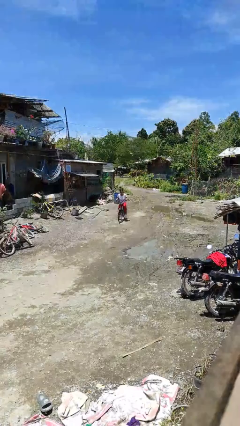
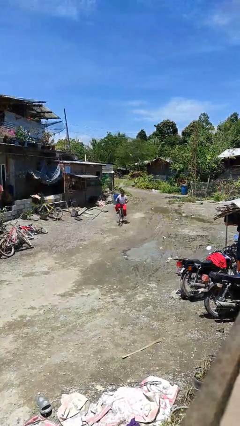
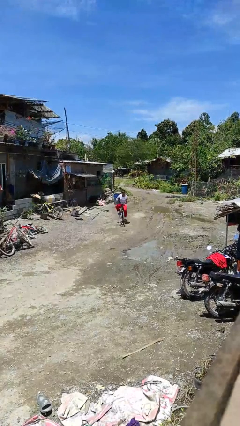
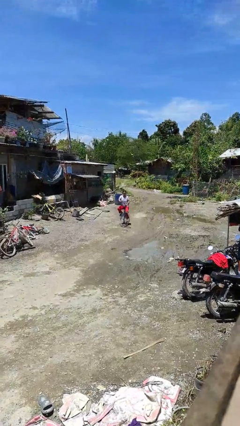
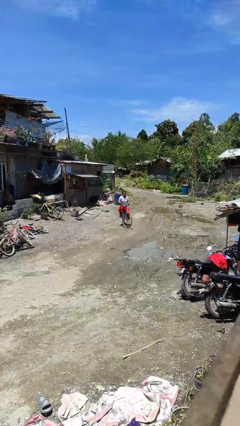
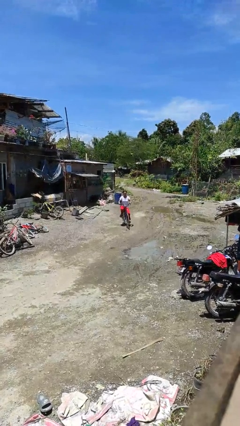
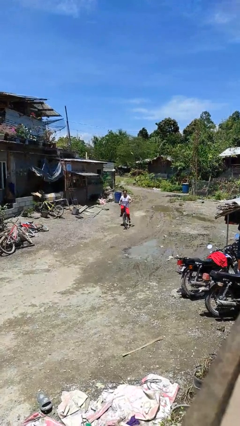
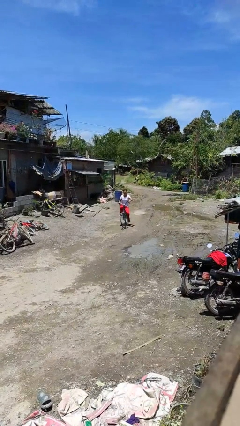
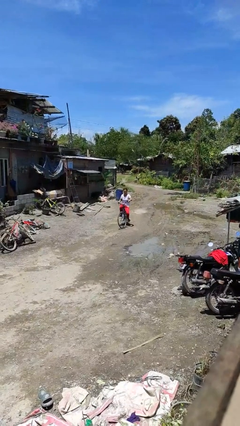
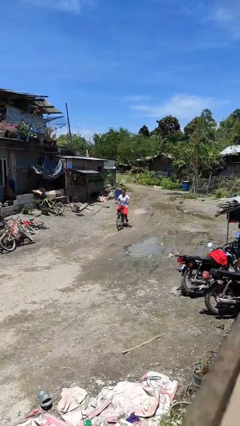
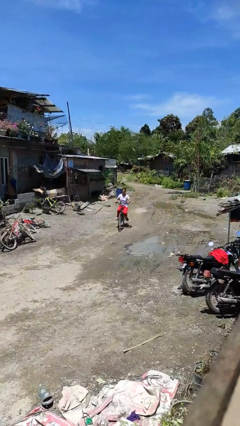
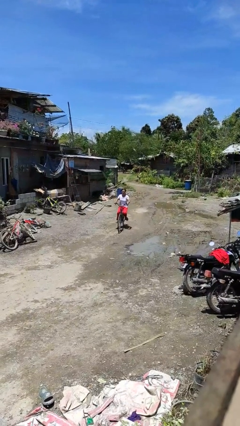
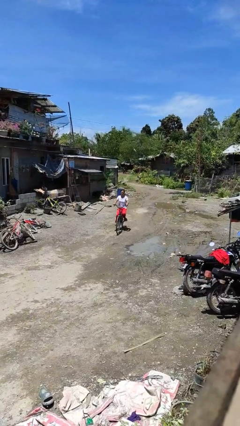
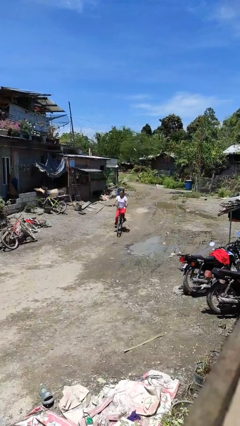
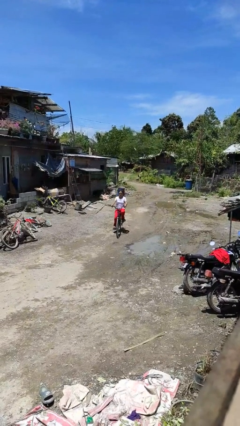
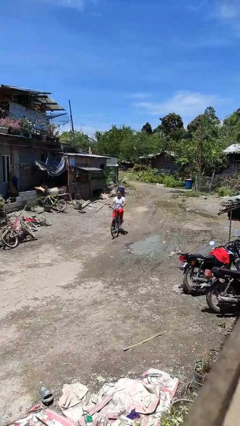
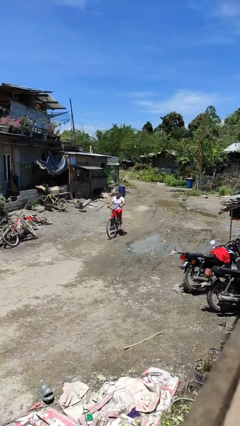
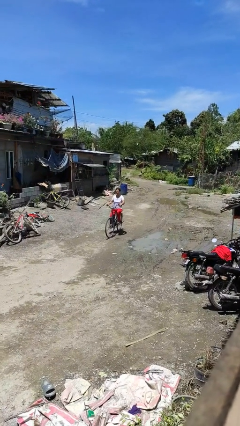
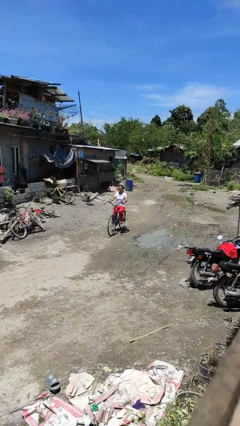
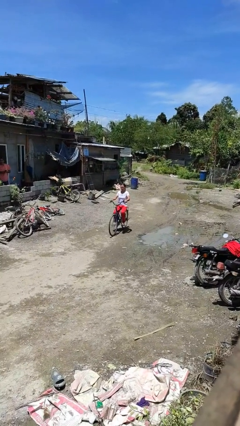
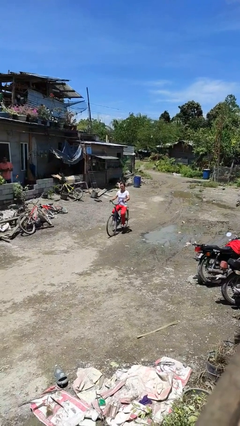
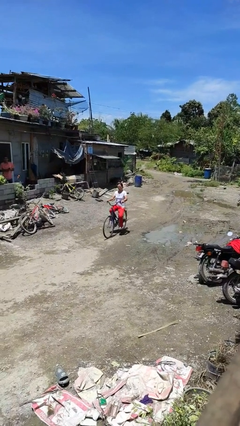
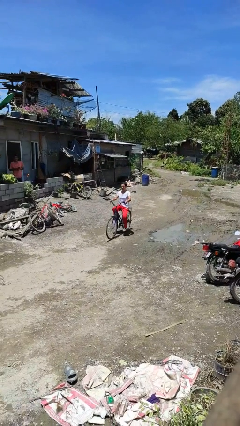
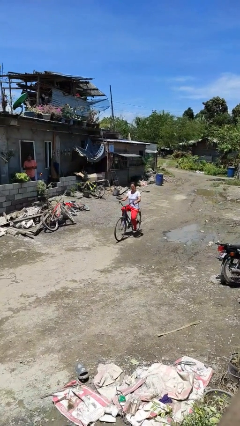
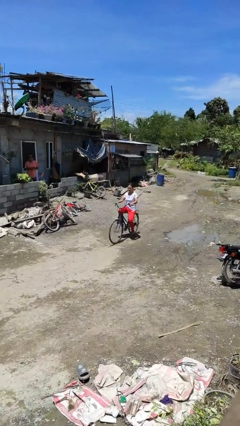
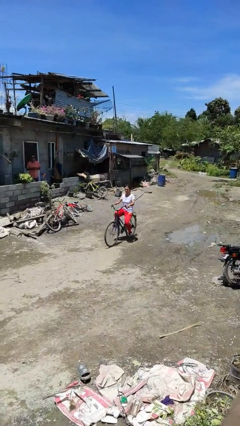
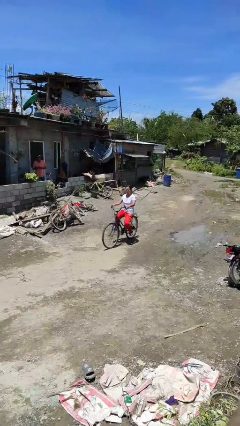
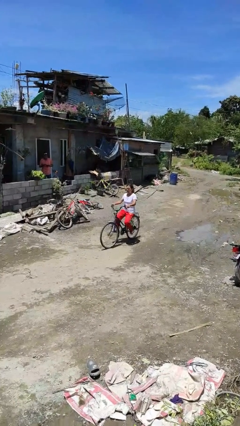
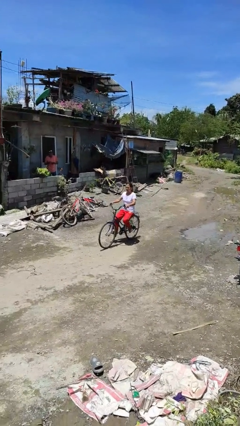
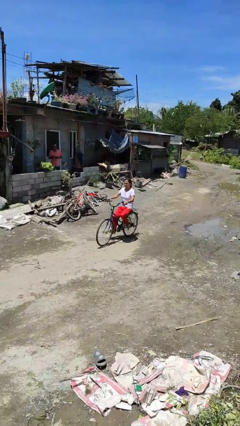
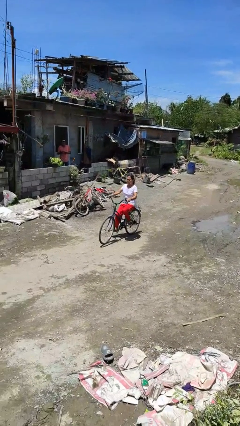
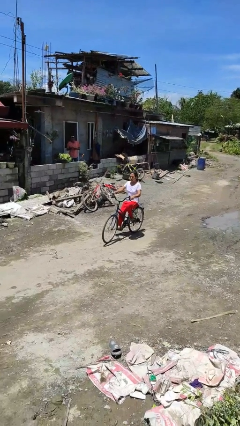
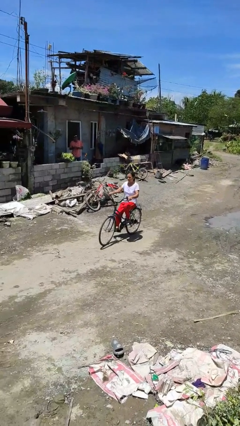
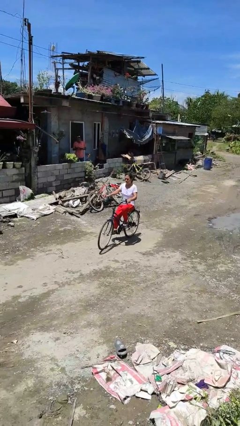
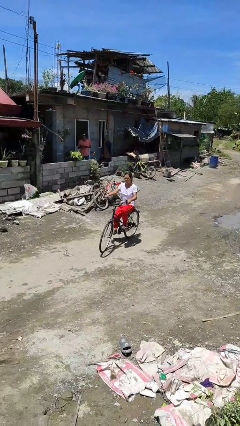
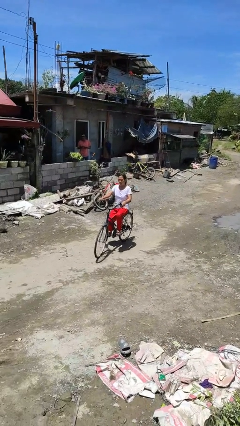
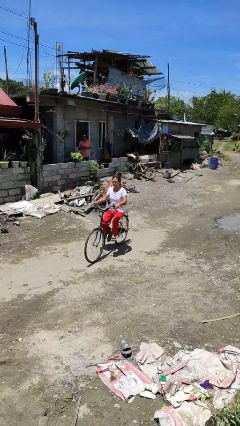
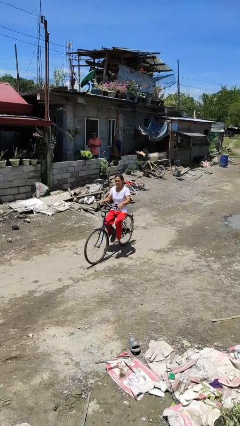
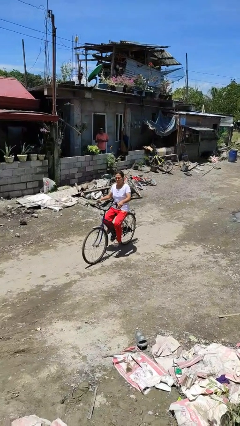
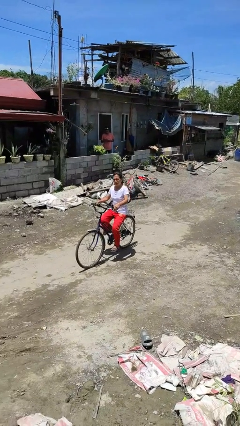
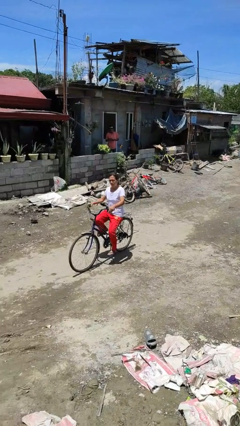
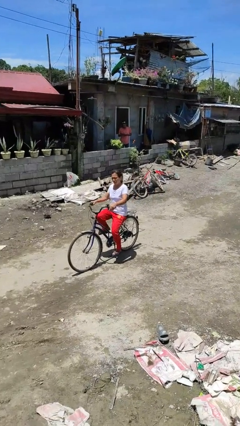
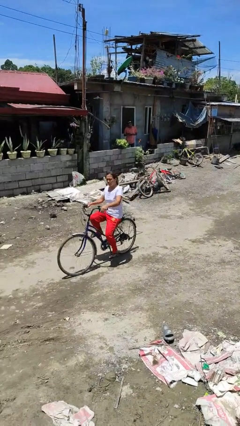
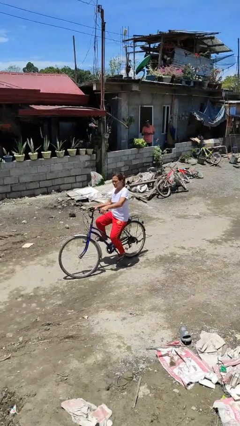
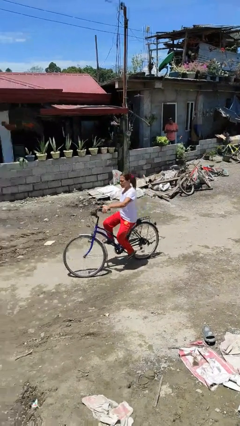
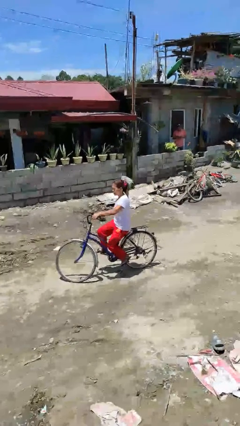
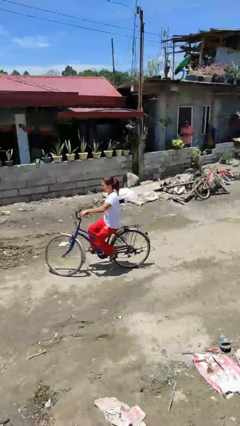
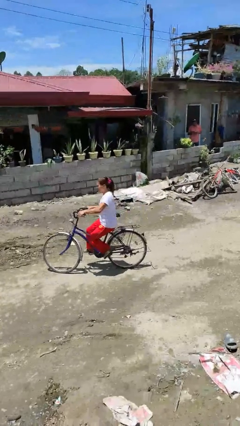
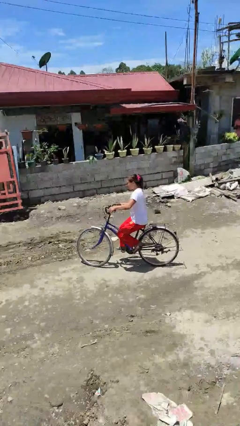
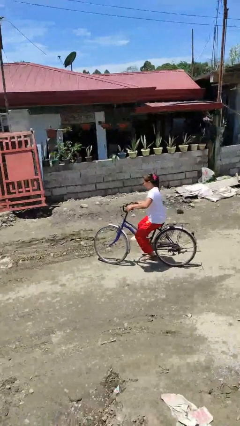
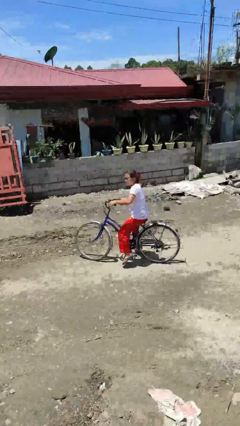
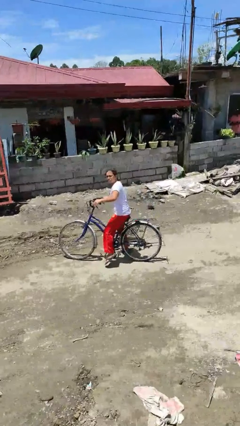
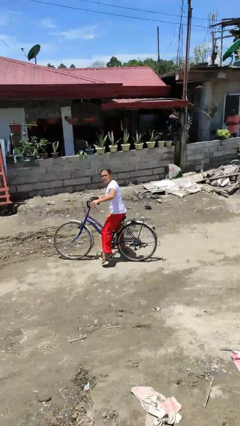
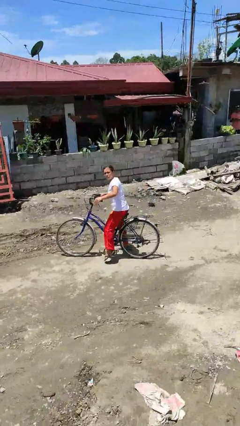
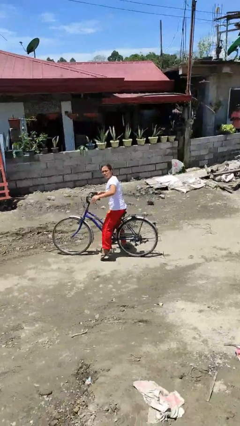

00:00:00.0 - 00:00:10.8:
person rides bicycle

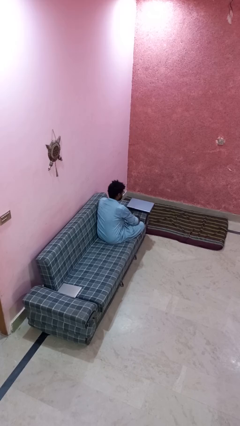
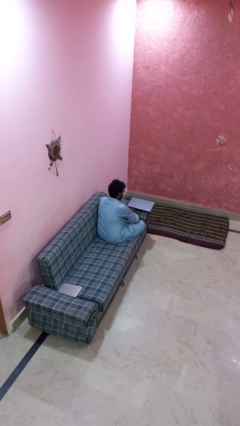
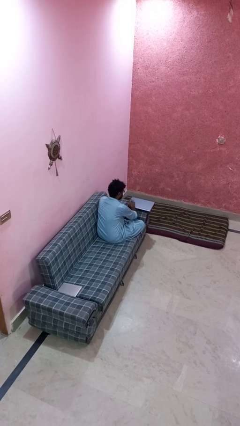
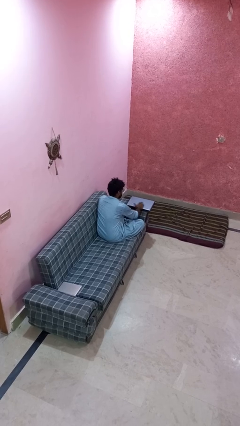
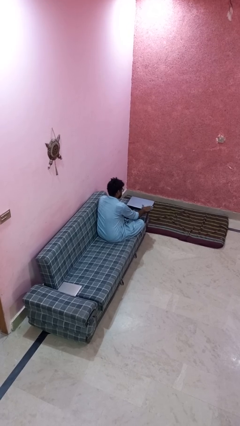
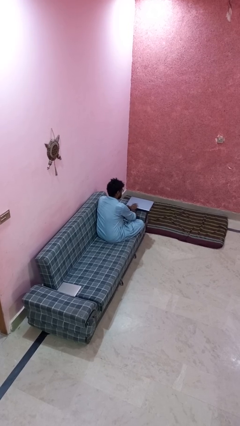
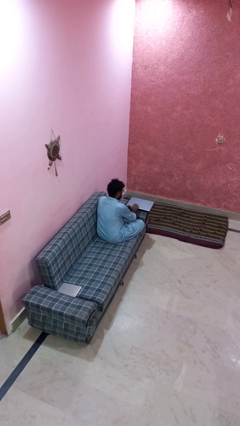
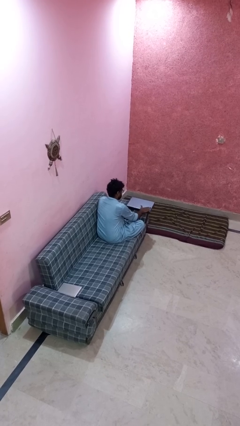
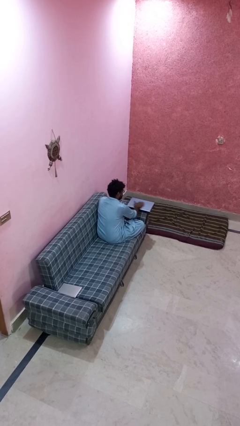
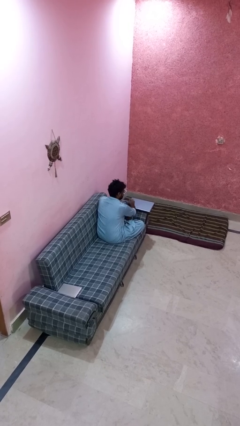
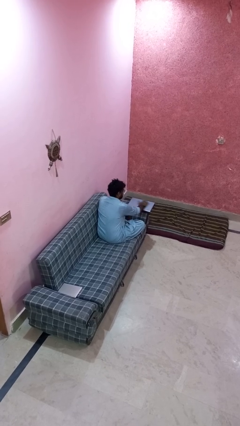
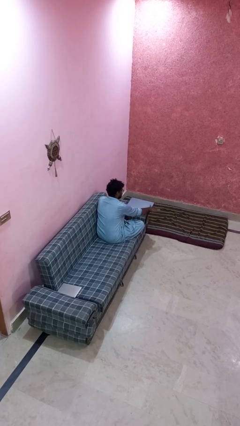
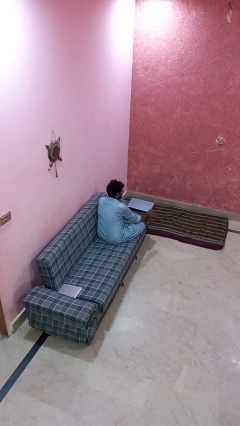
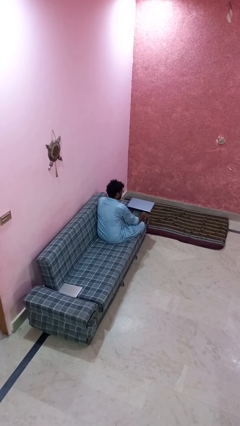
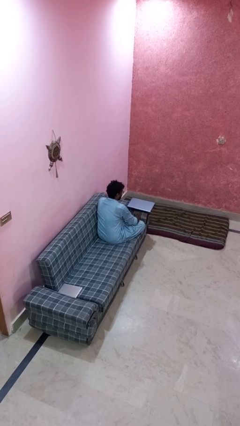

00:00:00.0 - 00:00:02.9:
person waves hand over object

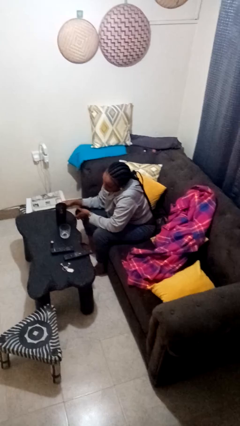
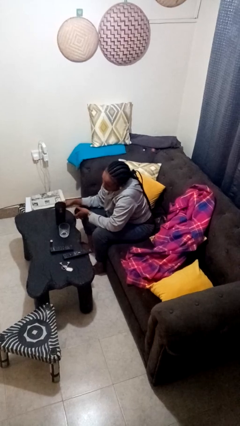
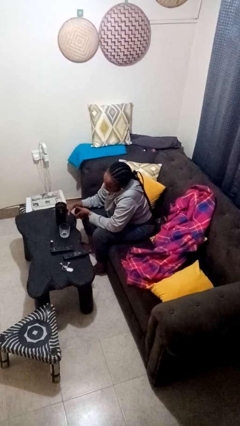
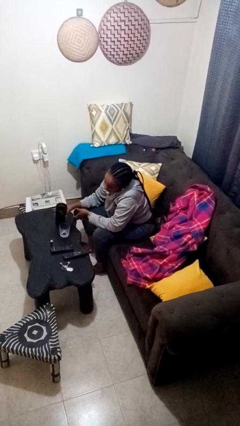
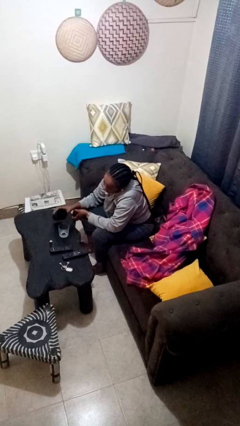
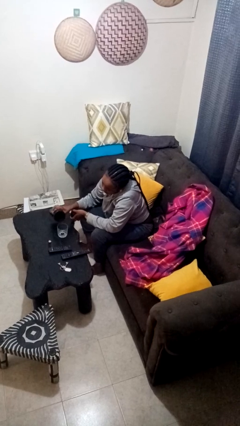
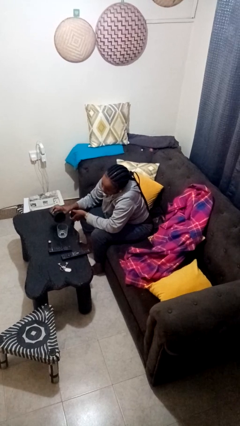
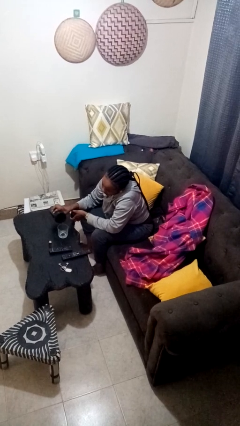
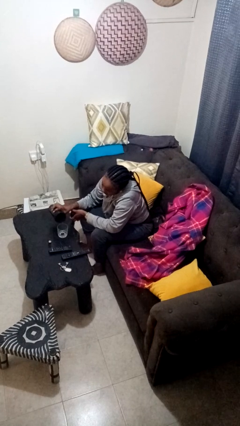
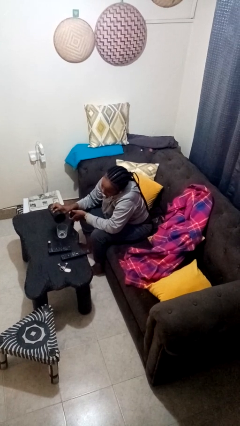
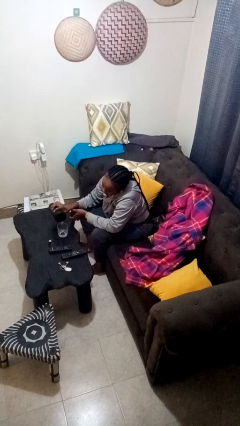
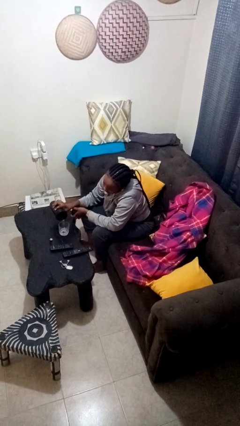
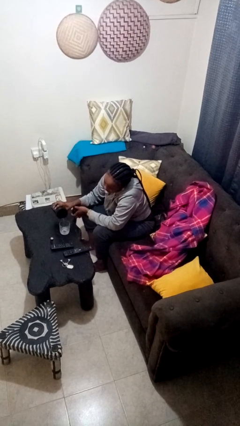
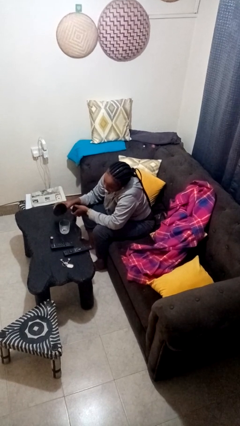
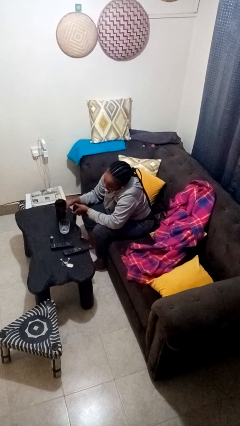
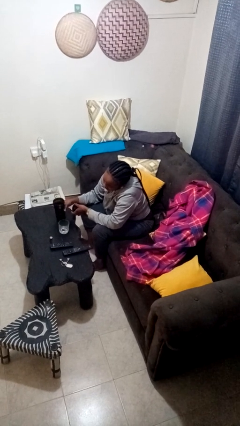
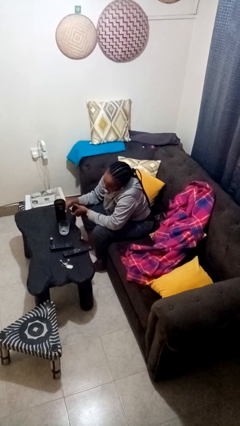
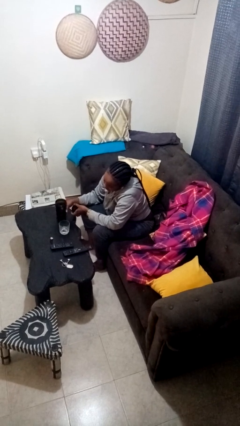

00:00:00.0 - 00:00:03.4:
person pours liquid into cup

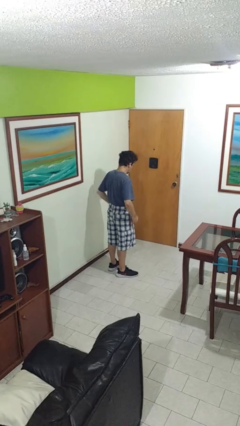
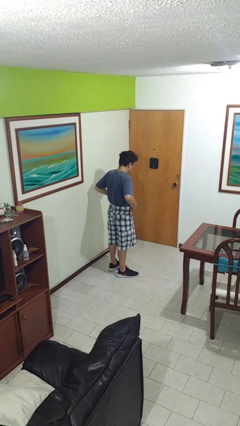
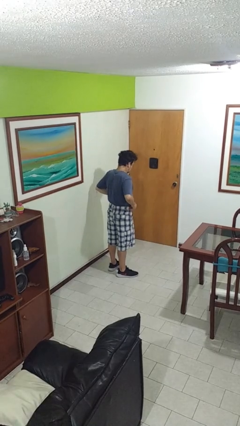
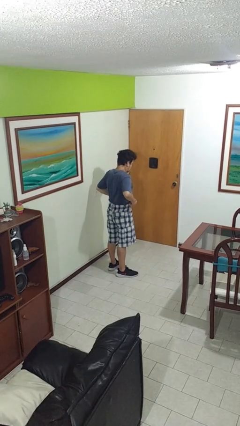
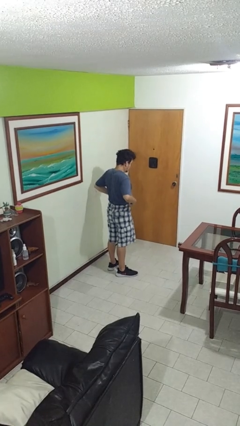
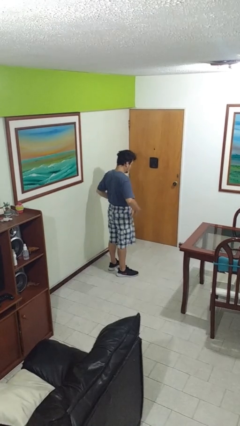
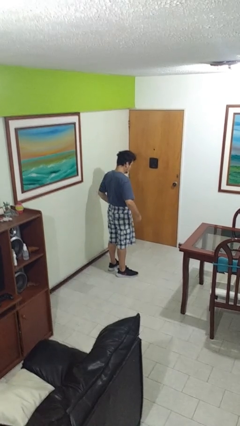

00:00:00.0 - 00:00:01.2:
person hikes up pants
